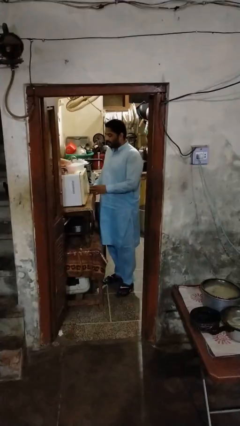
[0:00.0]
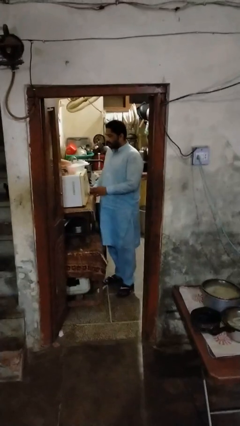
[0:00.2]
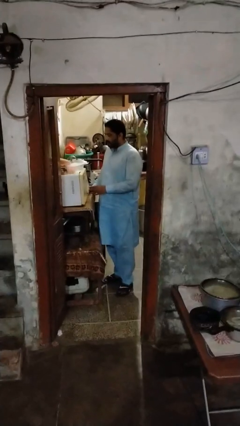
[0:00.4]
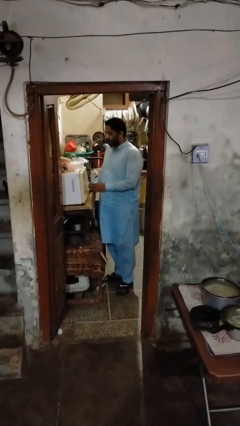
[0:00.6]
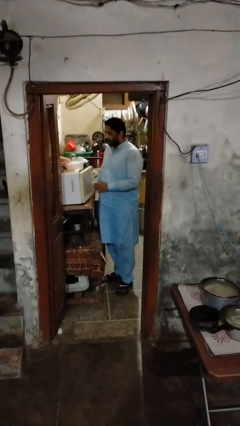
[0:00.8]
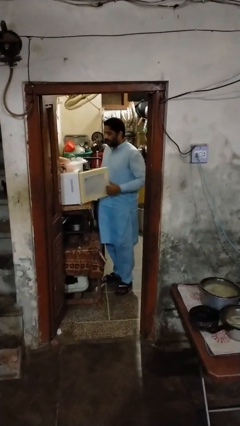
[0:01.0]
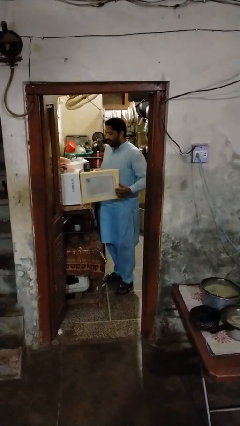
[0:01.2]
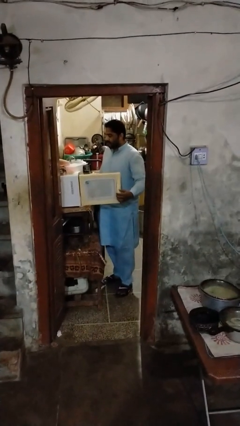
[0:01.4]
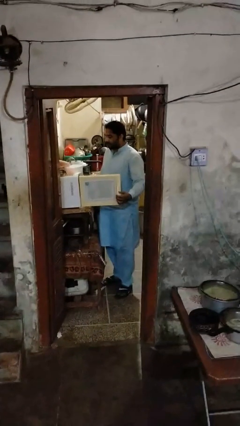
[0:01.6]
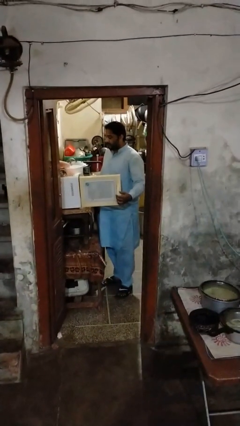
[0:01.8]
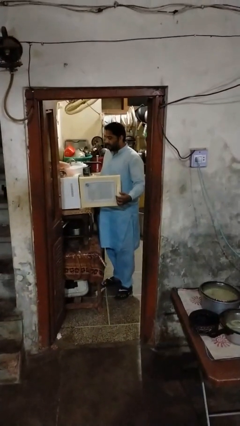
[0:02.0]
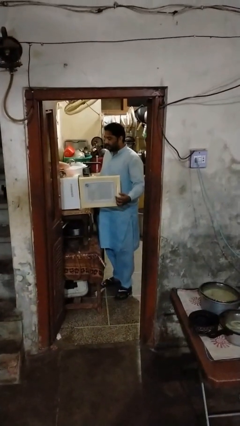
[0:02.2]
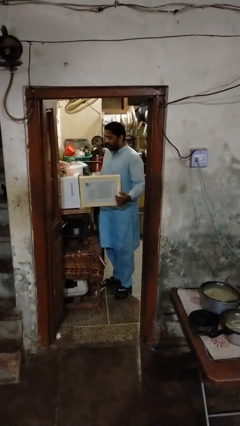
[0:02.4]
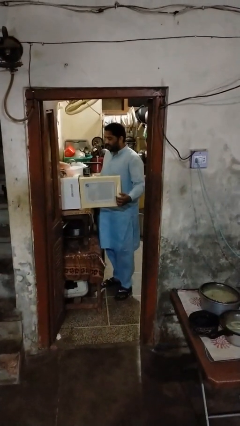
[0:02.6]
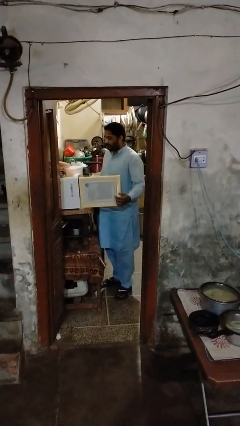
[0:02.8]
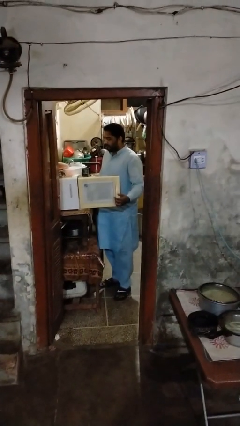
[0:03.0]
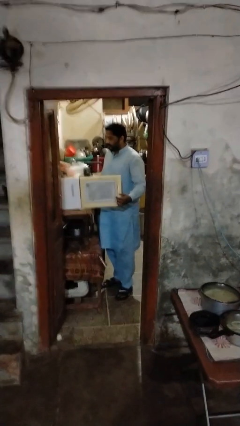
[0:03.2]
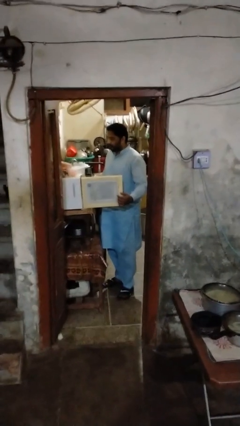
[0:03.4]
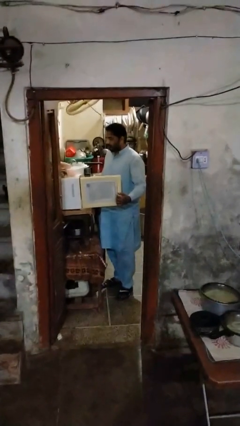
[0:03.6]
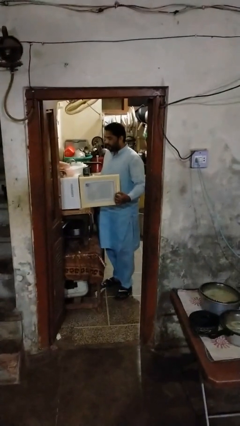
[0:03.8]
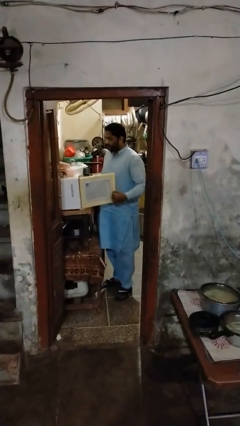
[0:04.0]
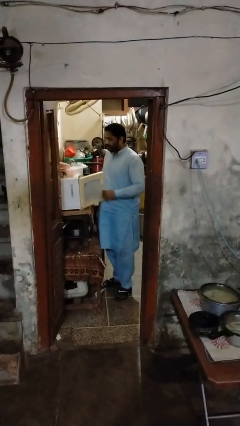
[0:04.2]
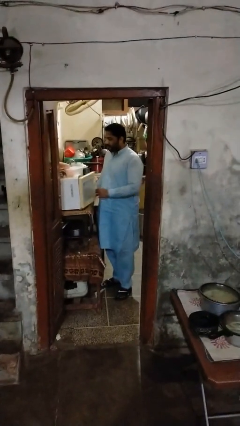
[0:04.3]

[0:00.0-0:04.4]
person lies down on bed

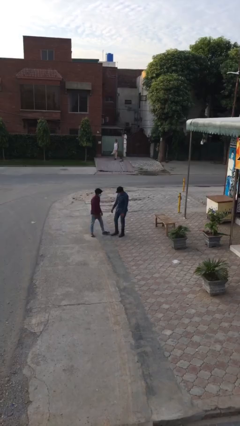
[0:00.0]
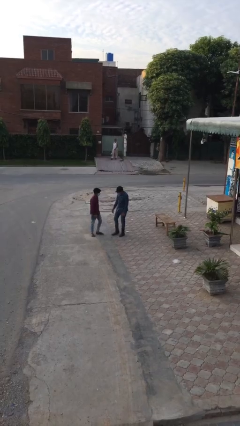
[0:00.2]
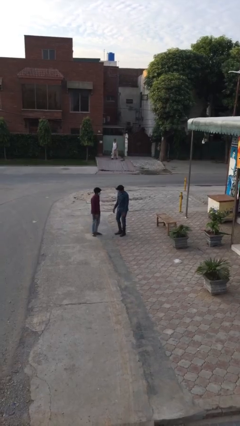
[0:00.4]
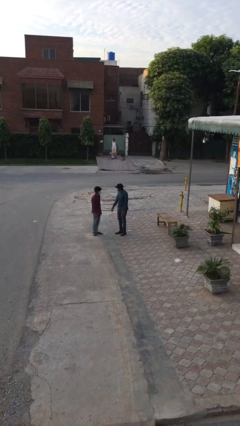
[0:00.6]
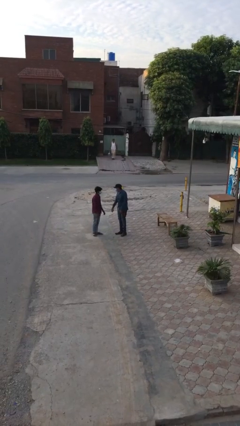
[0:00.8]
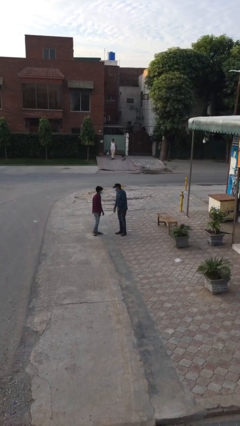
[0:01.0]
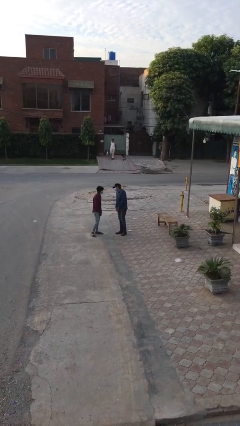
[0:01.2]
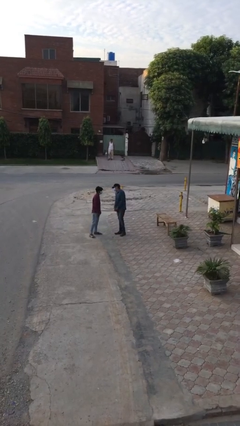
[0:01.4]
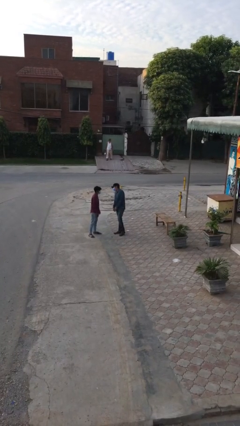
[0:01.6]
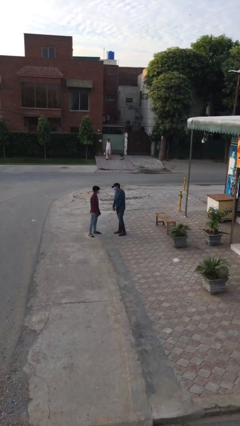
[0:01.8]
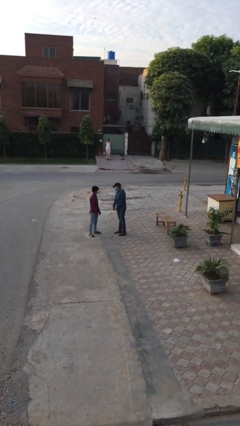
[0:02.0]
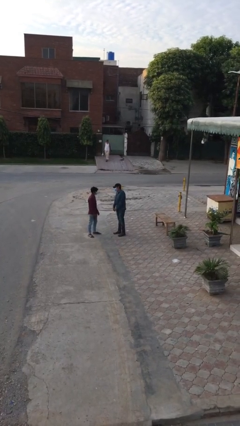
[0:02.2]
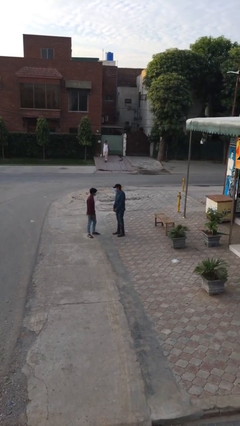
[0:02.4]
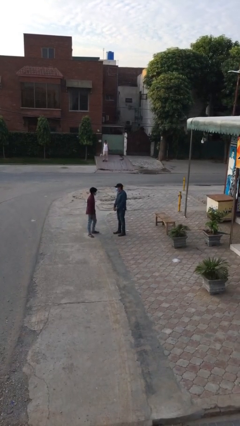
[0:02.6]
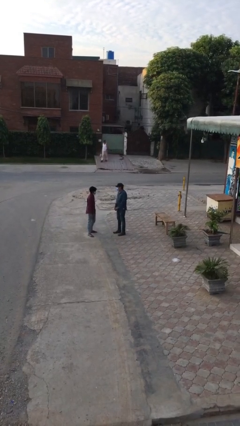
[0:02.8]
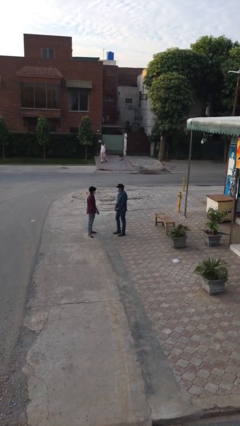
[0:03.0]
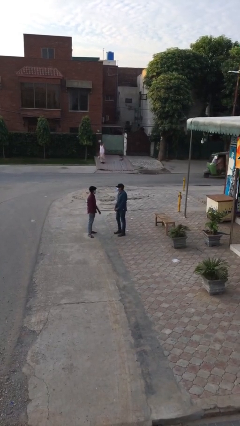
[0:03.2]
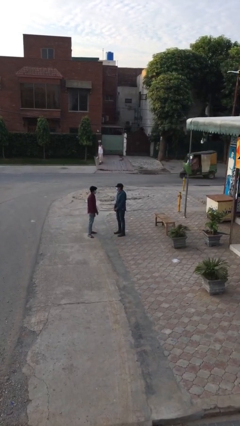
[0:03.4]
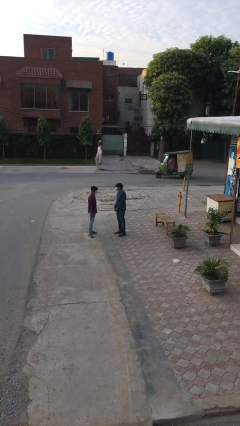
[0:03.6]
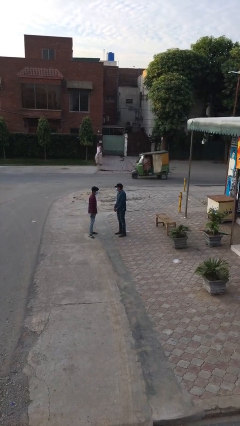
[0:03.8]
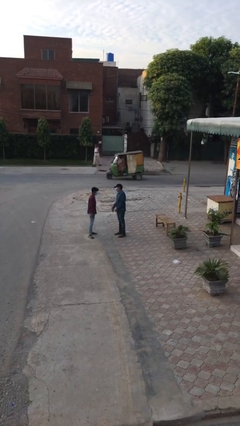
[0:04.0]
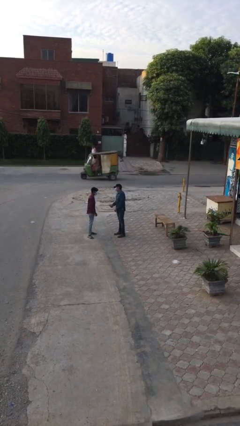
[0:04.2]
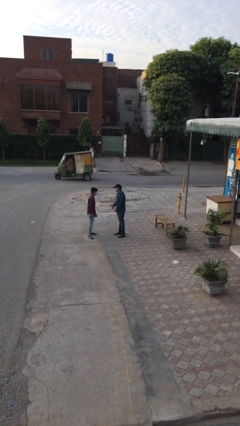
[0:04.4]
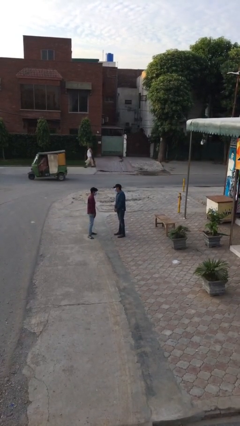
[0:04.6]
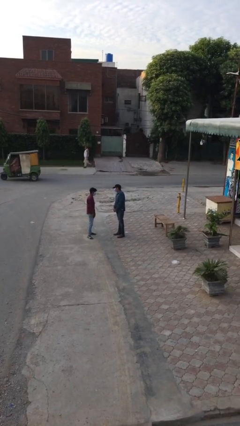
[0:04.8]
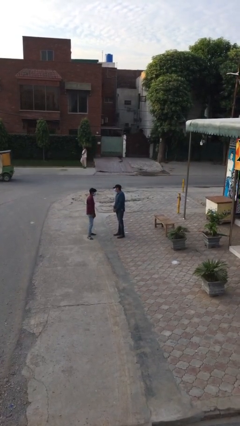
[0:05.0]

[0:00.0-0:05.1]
person talks to person

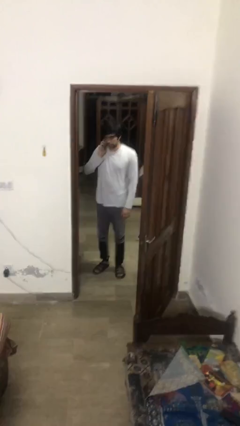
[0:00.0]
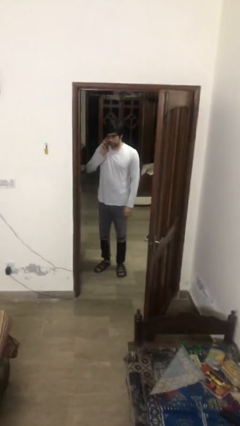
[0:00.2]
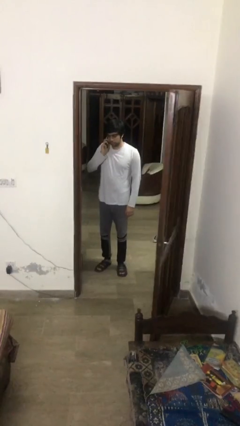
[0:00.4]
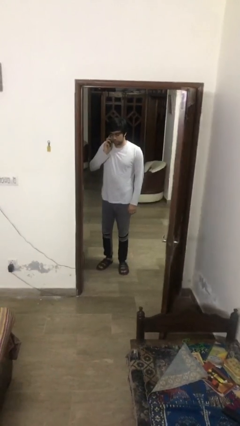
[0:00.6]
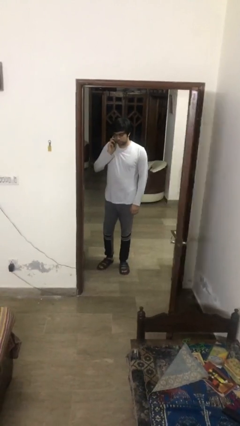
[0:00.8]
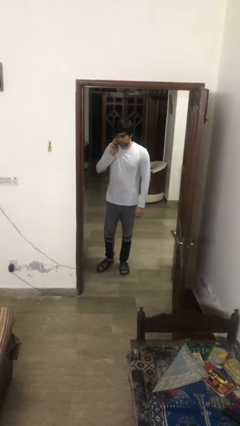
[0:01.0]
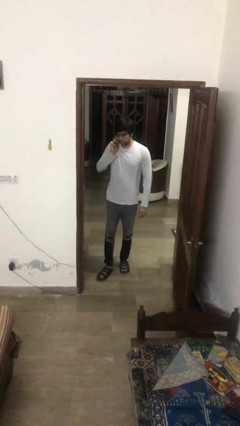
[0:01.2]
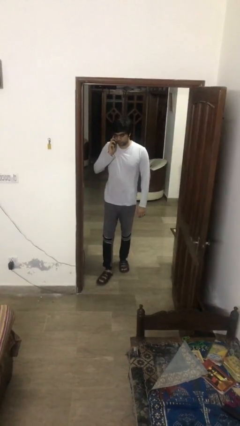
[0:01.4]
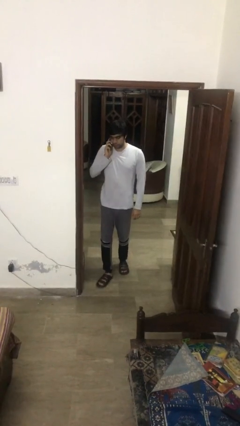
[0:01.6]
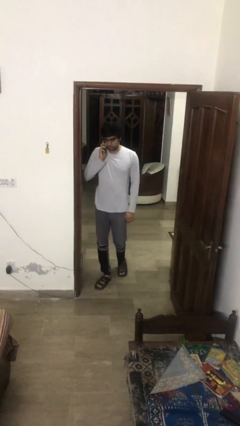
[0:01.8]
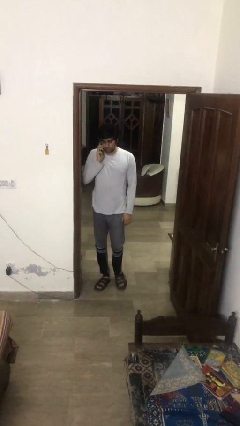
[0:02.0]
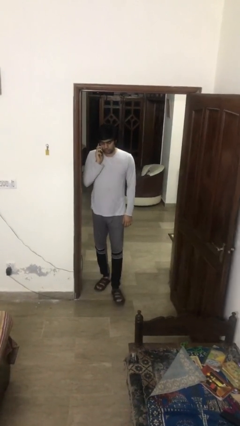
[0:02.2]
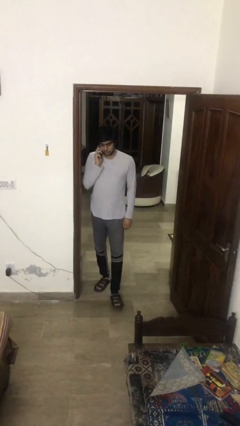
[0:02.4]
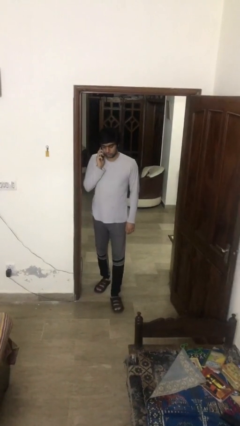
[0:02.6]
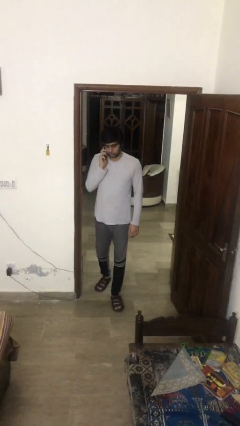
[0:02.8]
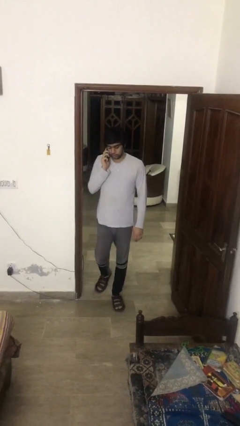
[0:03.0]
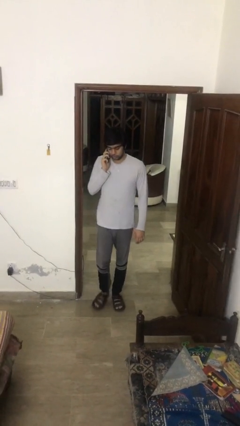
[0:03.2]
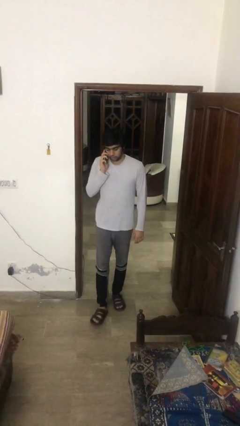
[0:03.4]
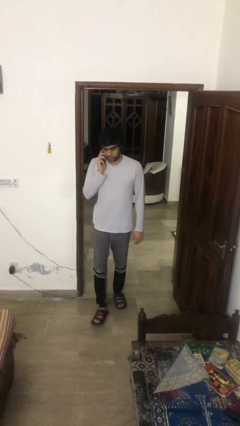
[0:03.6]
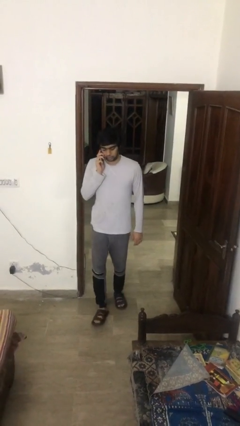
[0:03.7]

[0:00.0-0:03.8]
person enters scene through structure

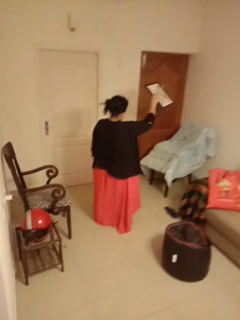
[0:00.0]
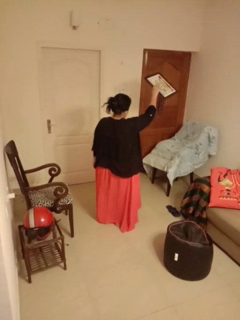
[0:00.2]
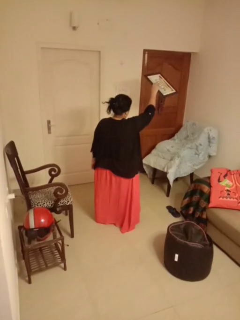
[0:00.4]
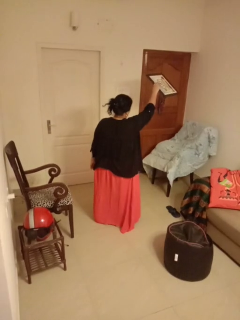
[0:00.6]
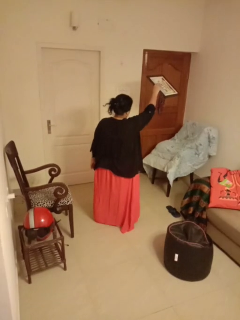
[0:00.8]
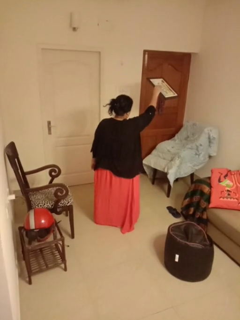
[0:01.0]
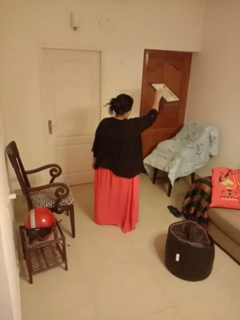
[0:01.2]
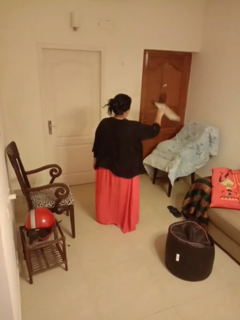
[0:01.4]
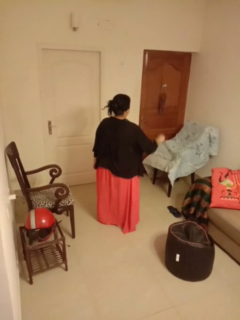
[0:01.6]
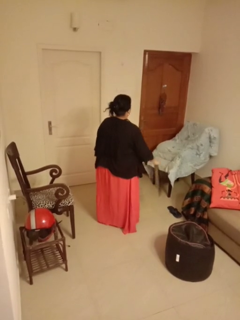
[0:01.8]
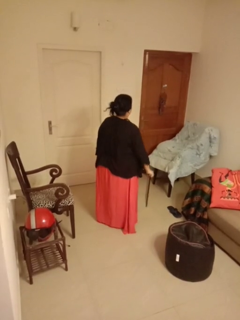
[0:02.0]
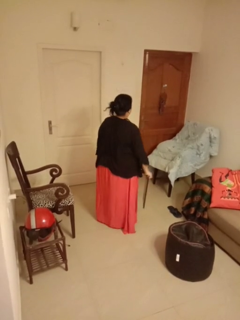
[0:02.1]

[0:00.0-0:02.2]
person holds object above head

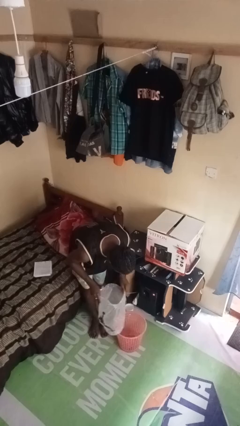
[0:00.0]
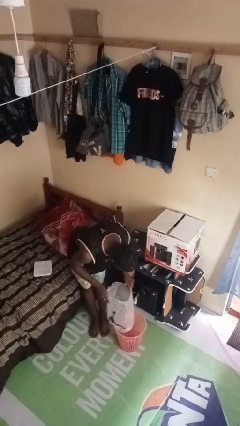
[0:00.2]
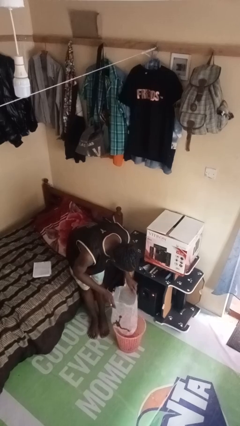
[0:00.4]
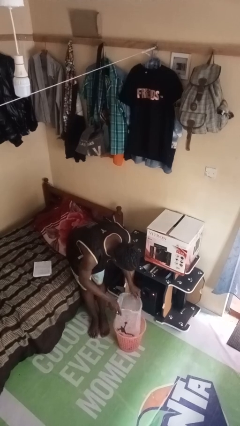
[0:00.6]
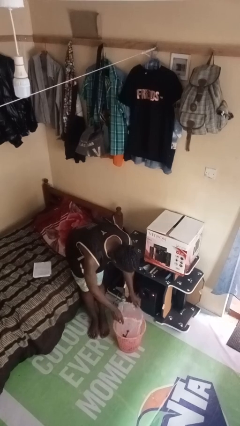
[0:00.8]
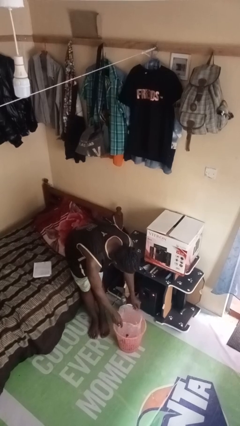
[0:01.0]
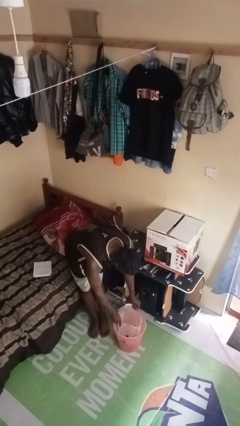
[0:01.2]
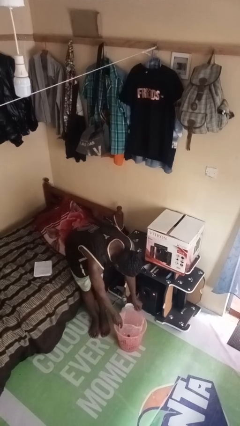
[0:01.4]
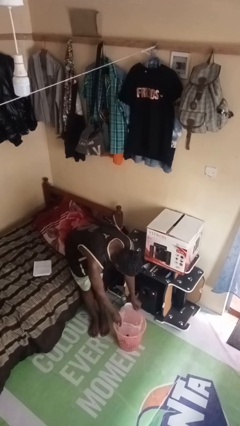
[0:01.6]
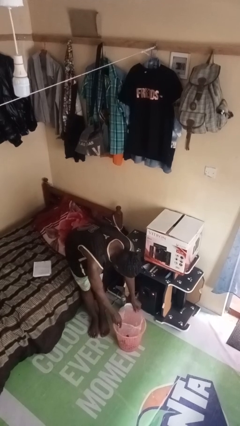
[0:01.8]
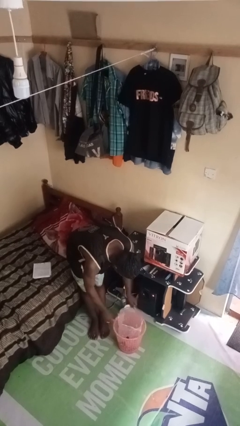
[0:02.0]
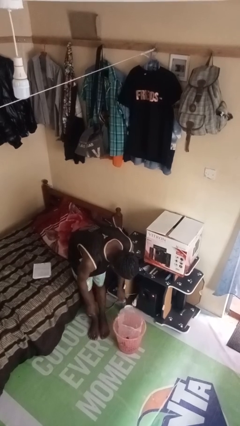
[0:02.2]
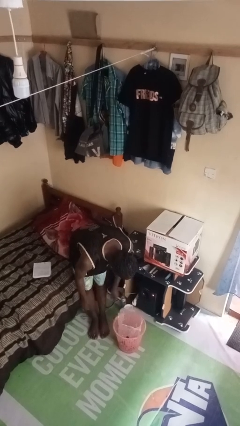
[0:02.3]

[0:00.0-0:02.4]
person inserts trashbag into trashcan
